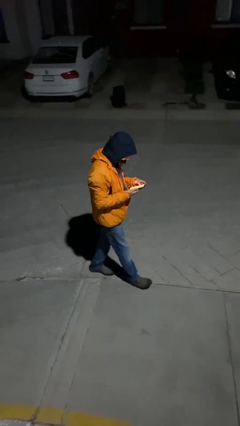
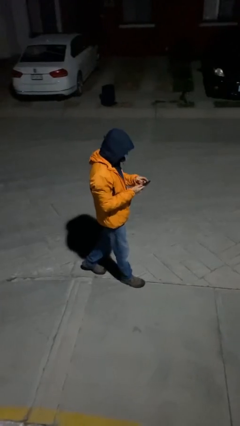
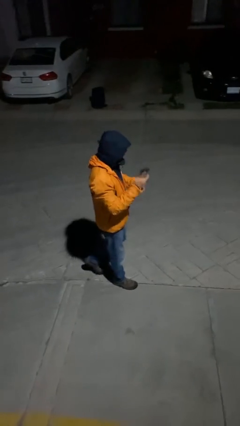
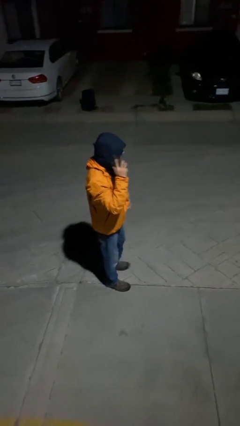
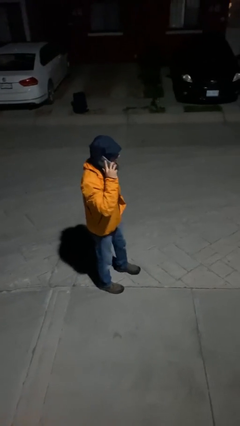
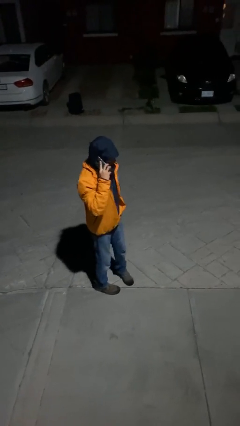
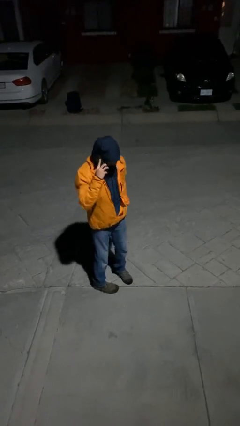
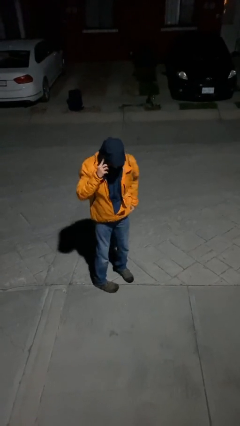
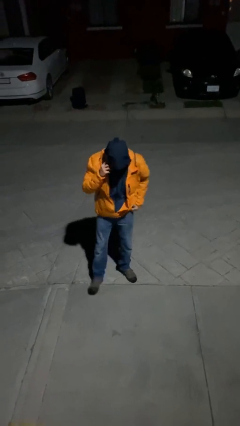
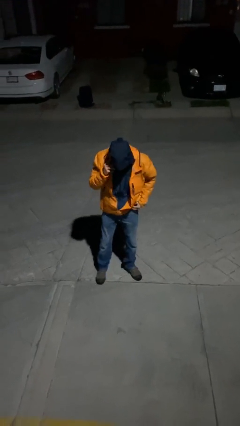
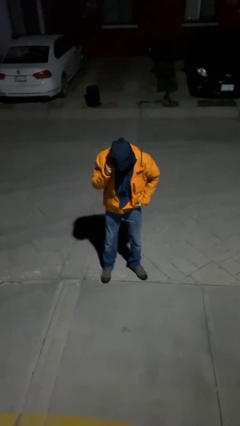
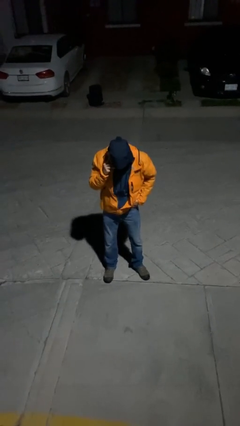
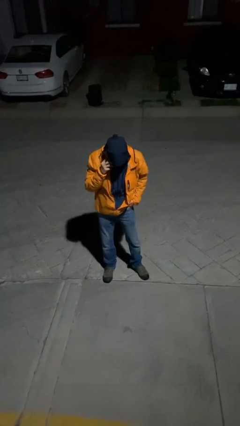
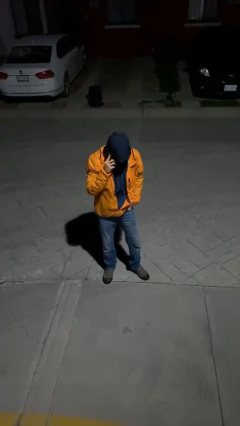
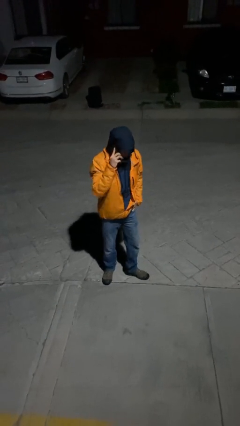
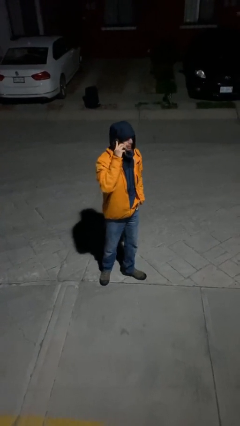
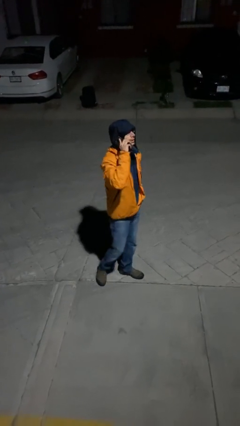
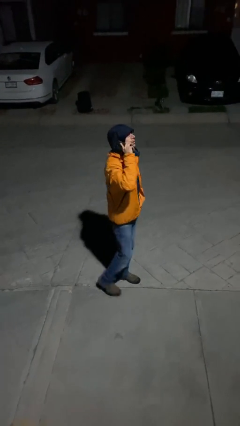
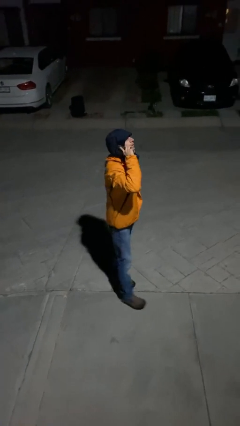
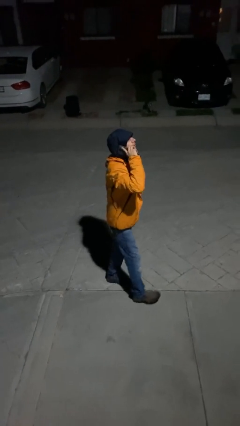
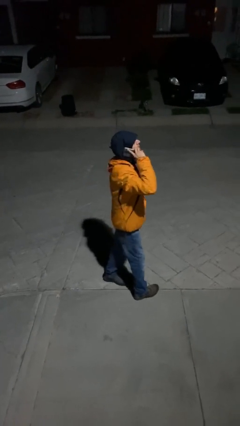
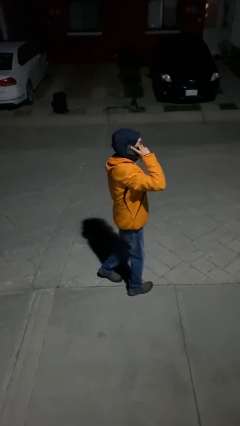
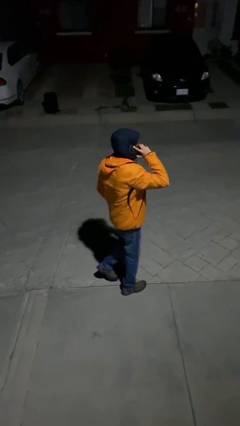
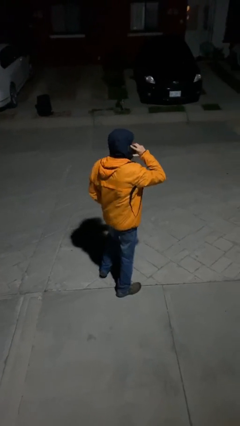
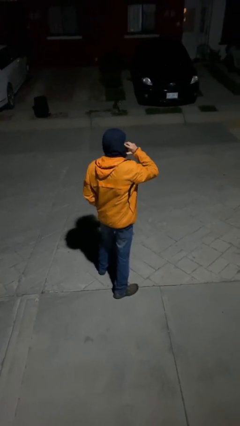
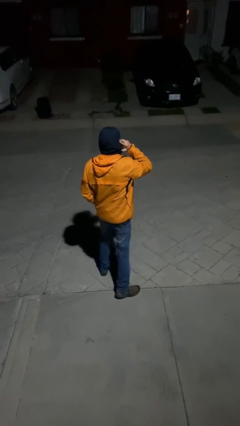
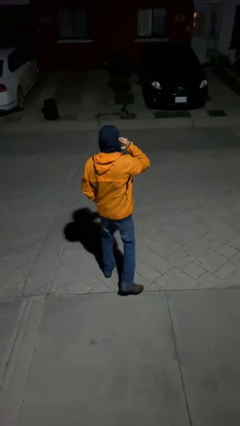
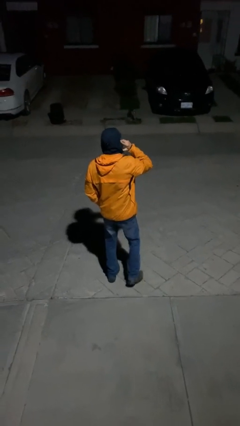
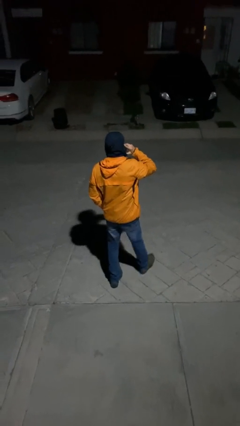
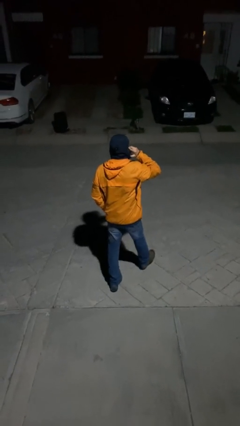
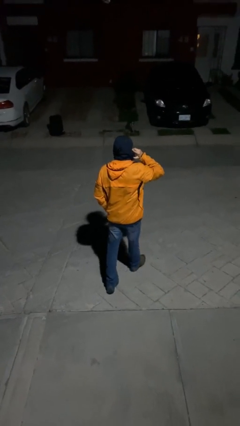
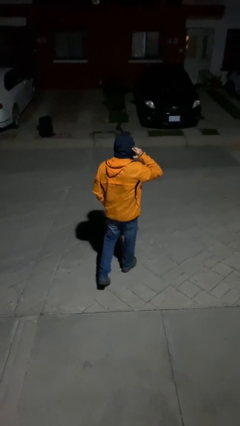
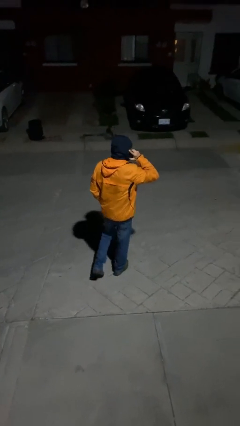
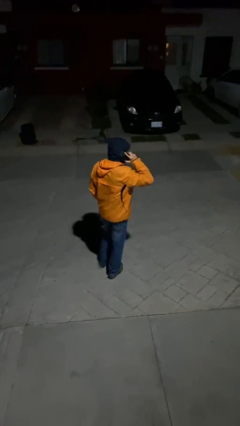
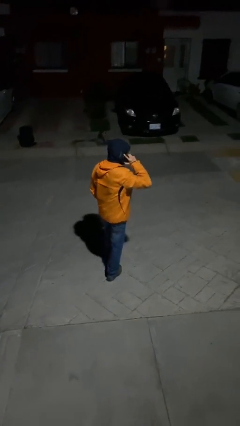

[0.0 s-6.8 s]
person talks on phone

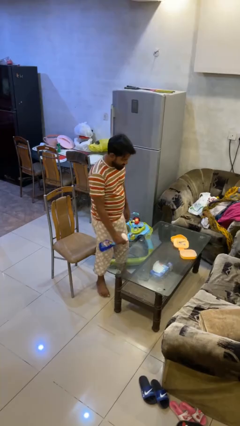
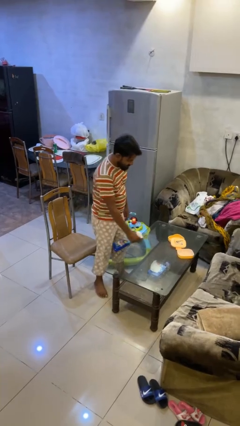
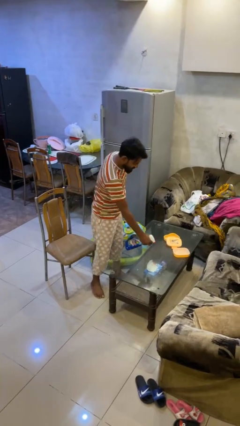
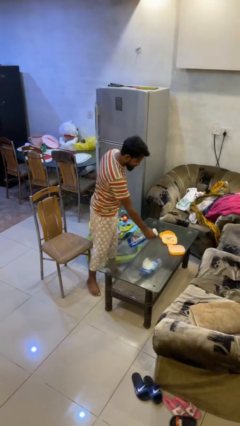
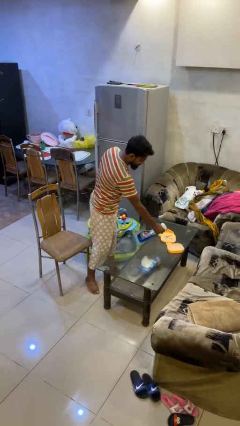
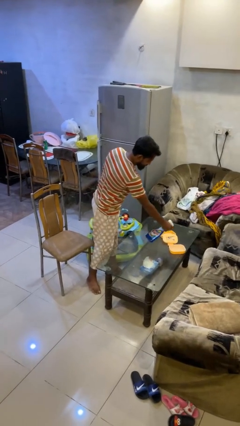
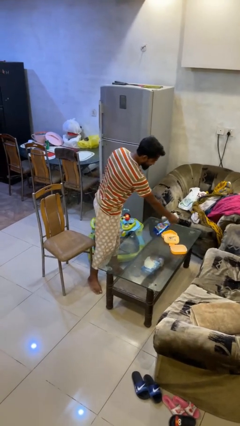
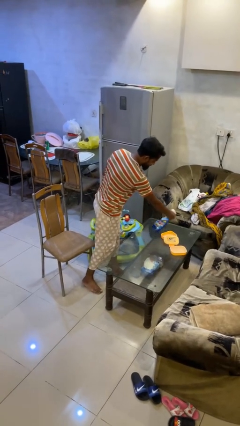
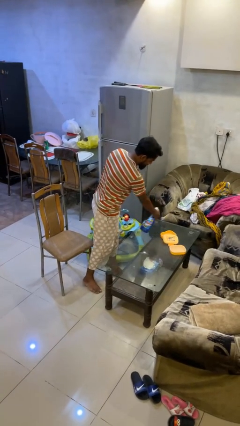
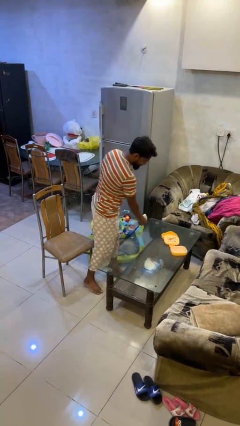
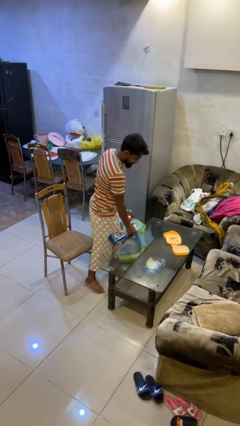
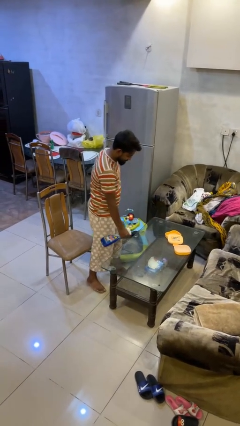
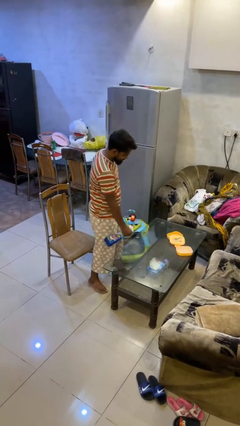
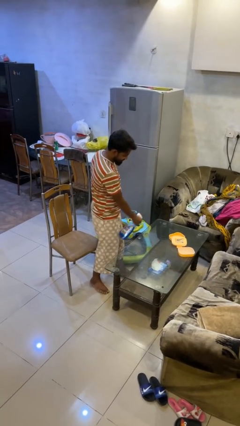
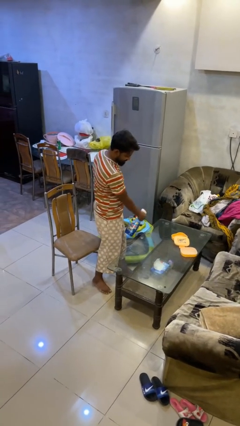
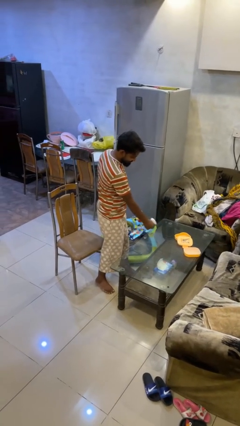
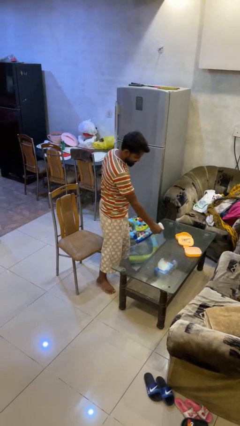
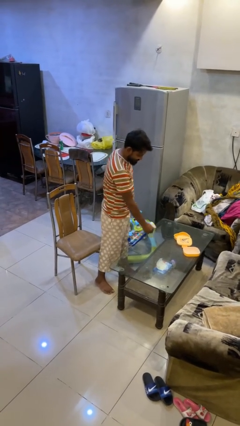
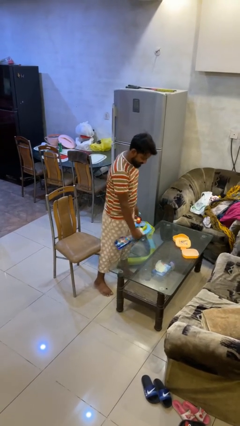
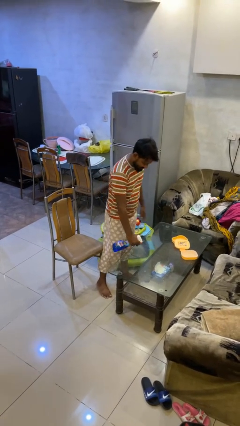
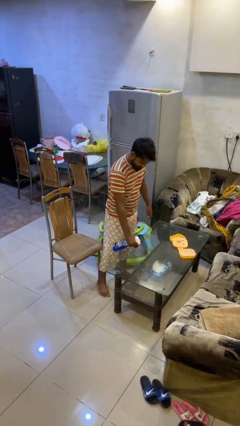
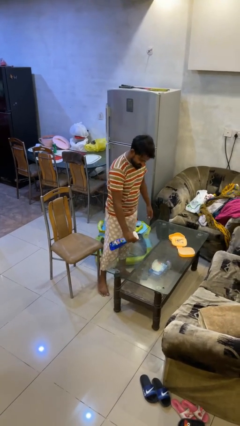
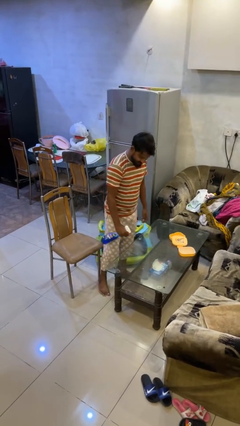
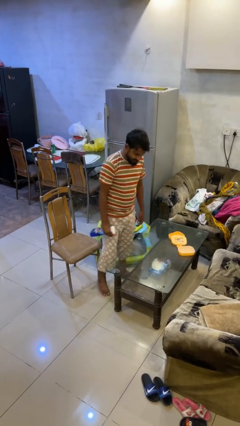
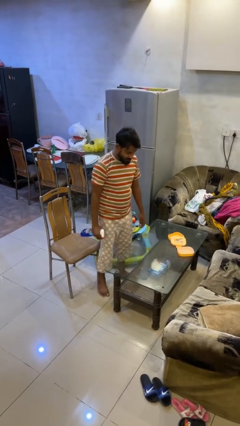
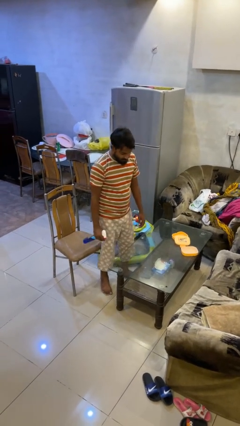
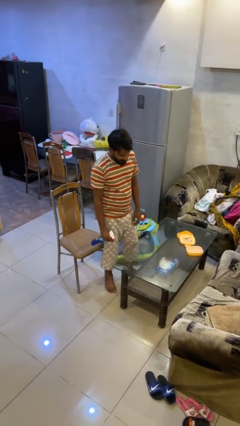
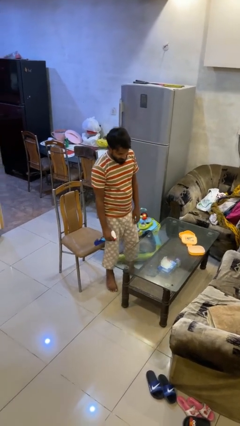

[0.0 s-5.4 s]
person sprays from bottle

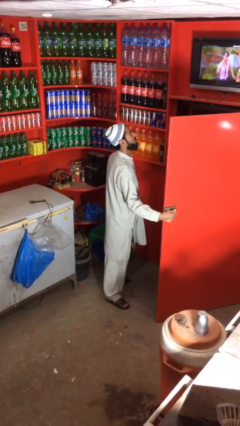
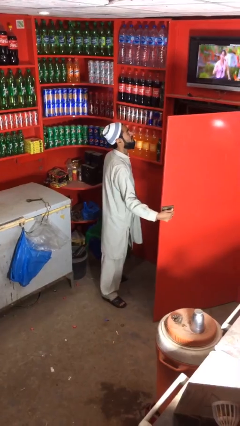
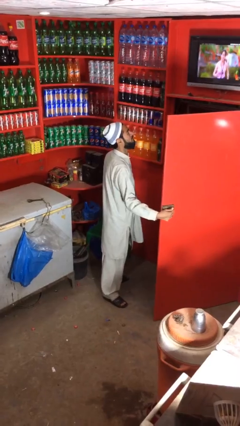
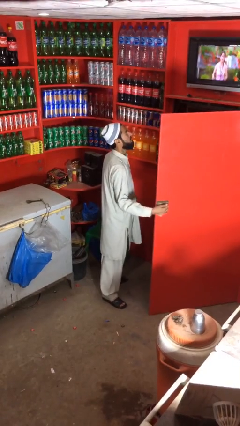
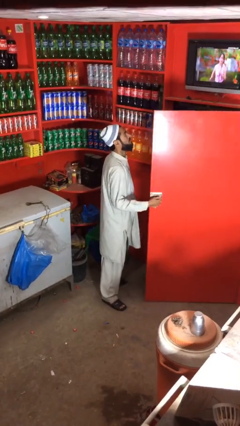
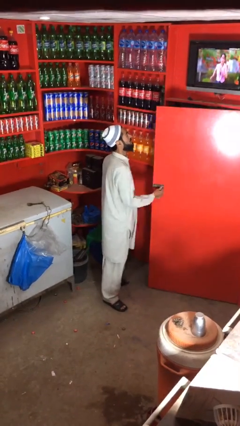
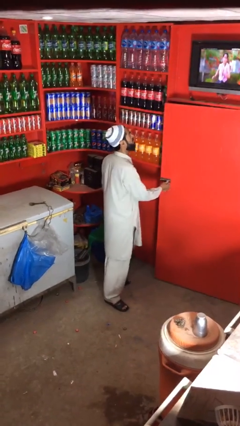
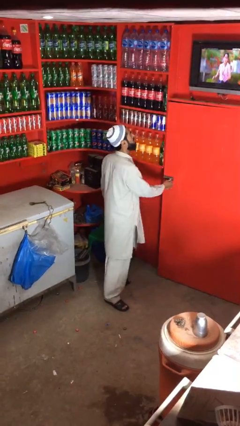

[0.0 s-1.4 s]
person closes facility door

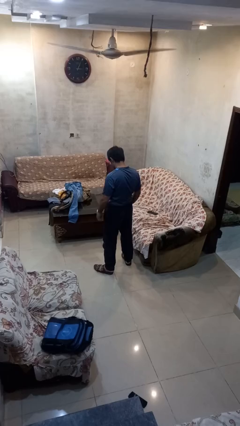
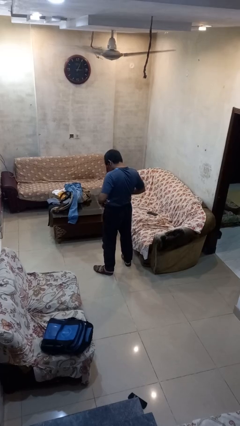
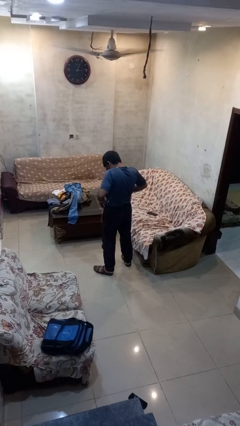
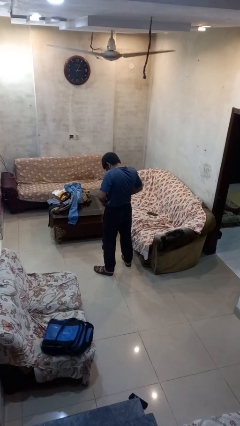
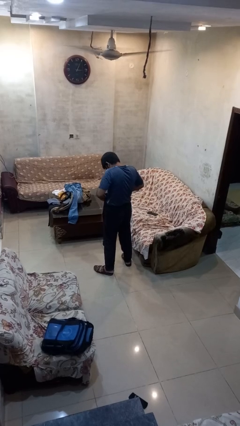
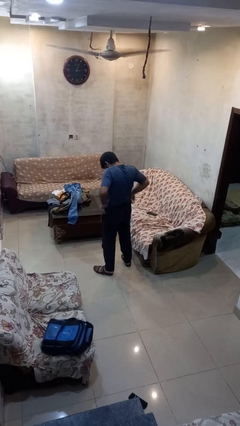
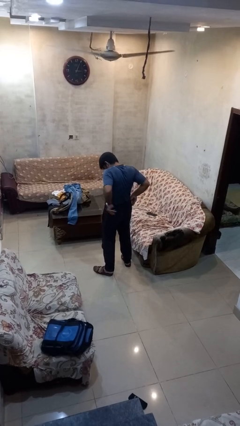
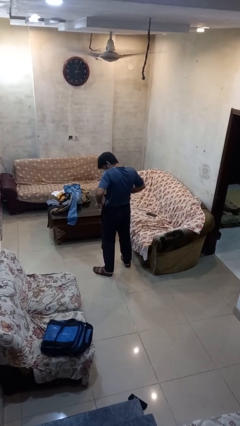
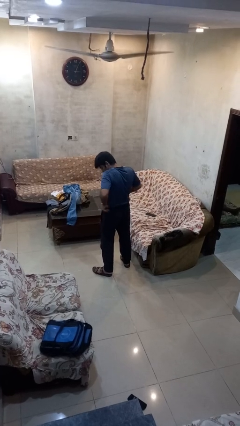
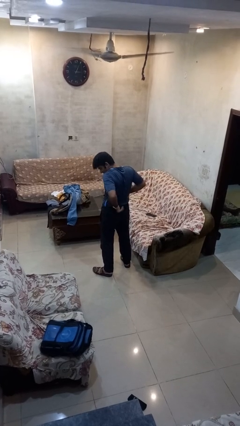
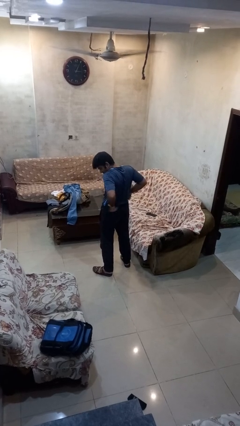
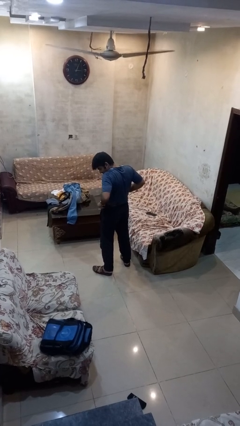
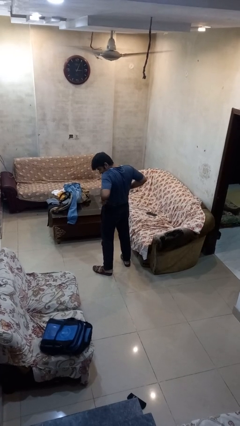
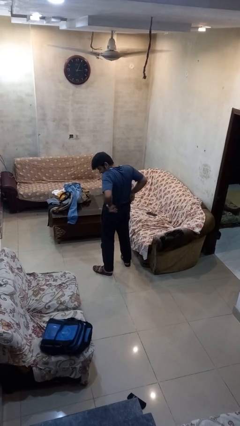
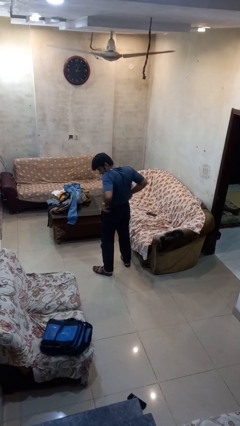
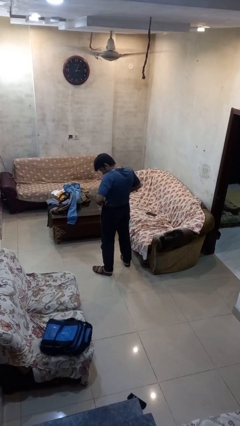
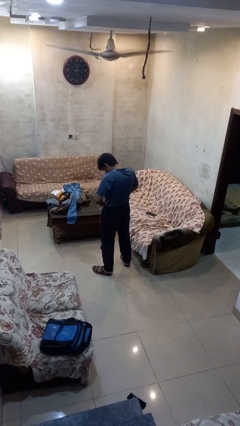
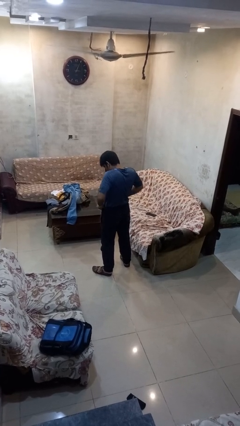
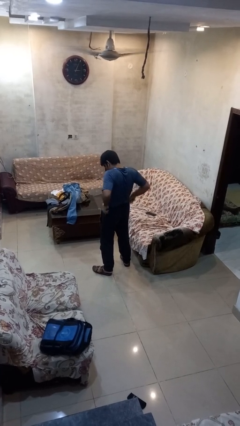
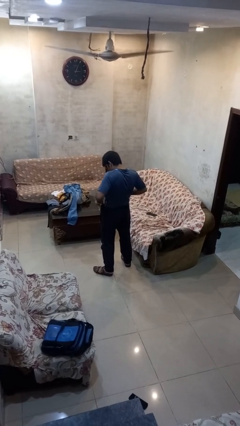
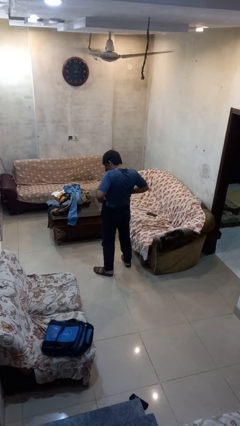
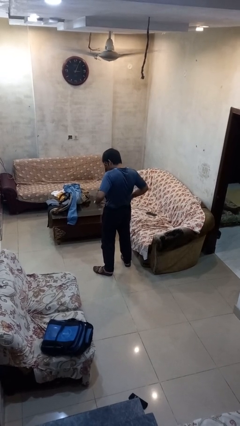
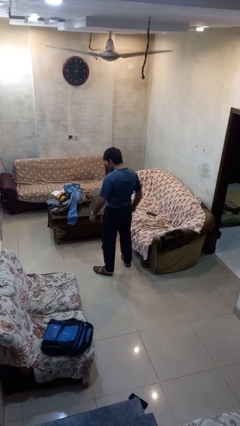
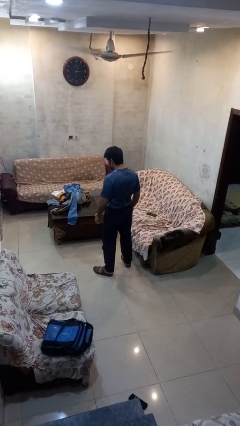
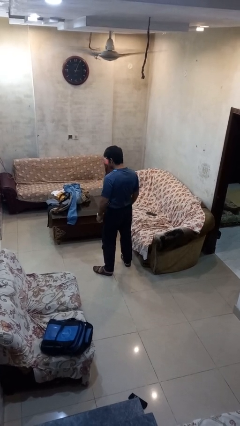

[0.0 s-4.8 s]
person hikes up pants
